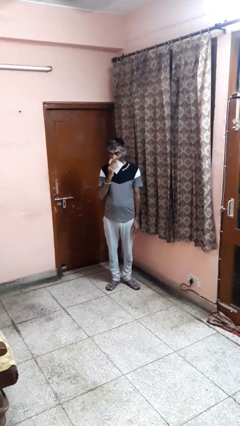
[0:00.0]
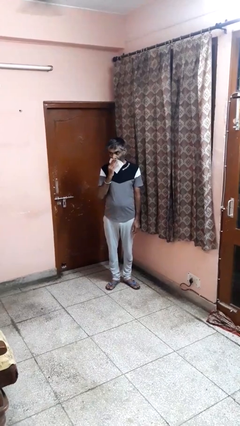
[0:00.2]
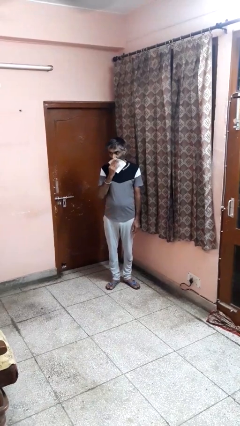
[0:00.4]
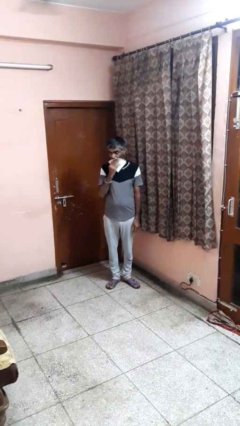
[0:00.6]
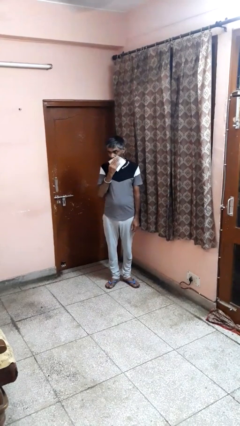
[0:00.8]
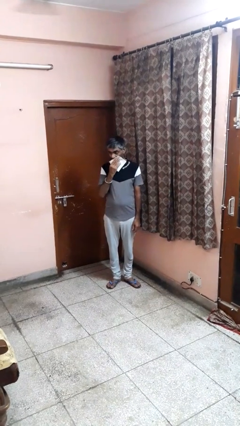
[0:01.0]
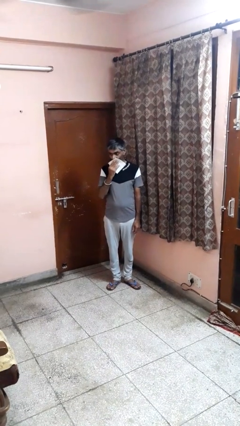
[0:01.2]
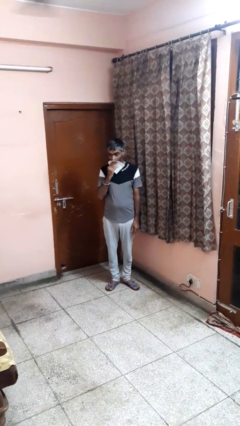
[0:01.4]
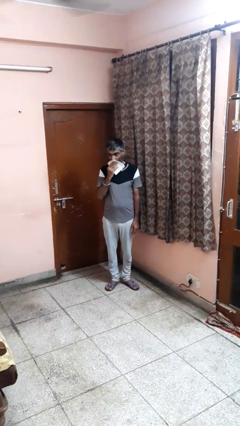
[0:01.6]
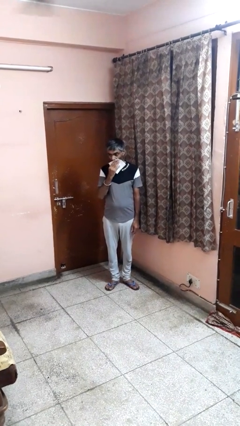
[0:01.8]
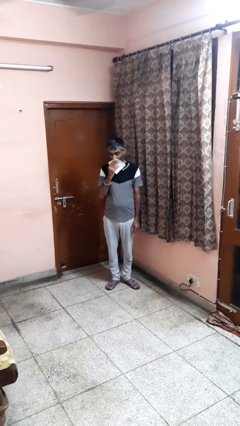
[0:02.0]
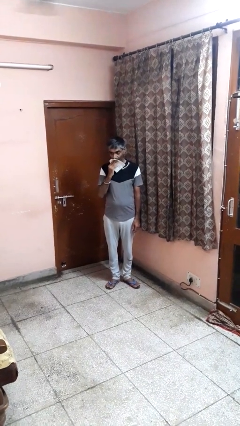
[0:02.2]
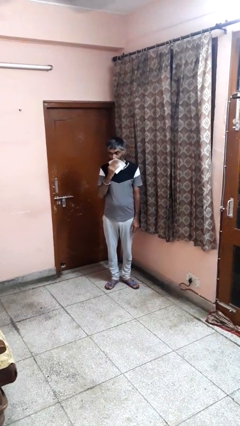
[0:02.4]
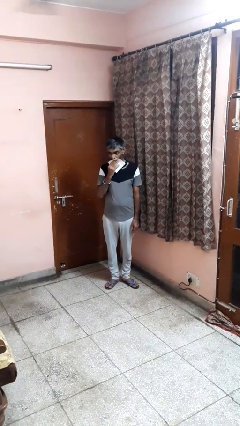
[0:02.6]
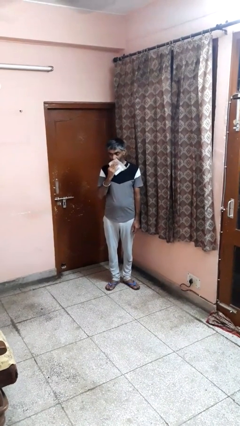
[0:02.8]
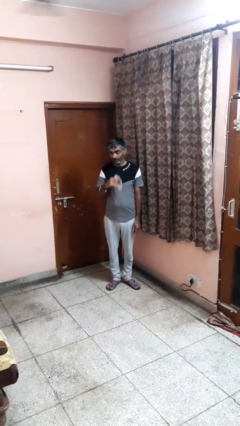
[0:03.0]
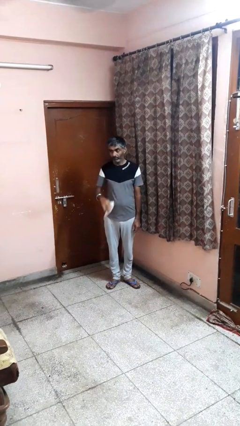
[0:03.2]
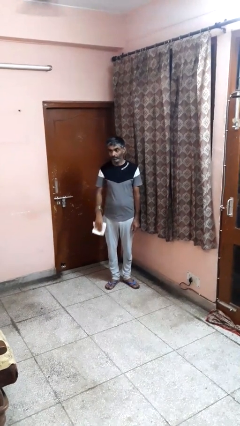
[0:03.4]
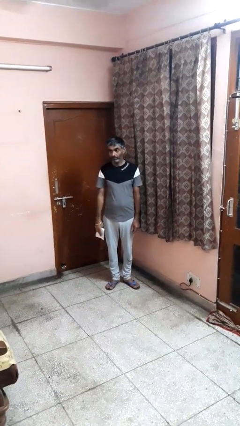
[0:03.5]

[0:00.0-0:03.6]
person wipes mouth with napkin

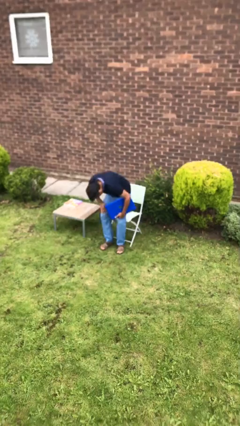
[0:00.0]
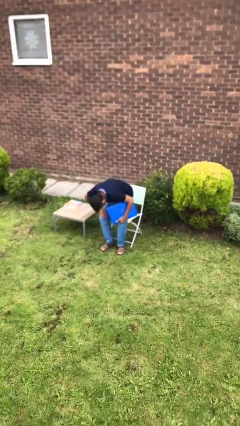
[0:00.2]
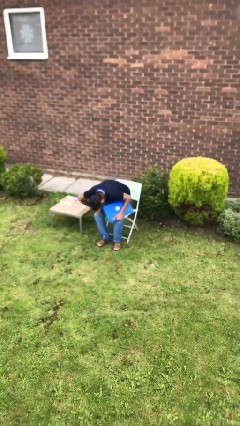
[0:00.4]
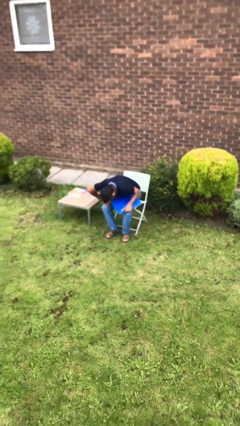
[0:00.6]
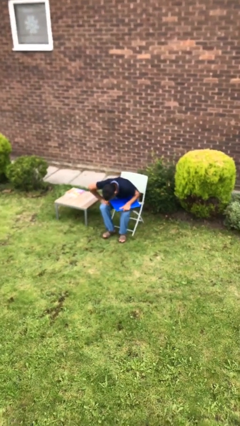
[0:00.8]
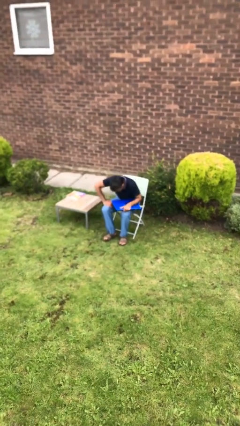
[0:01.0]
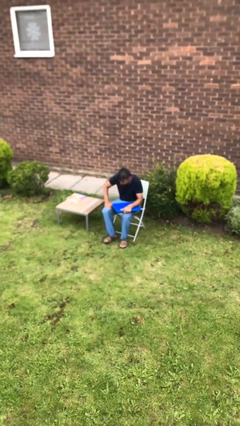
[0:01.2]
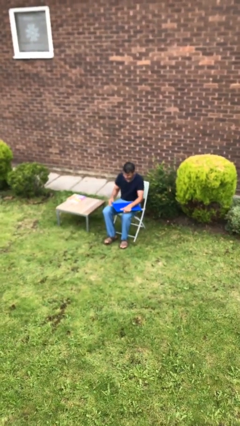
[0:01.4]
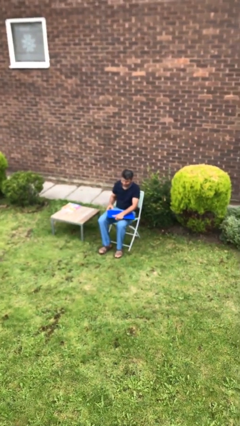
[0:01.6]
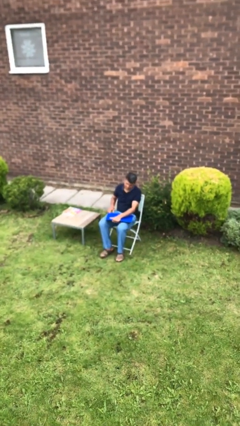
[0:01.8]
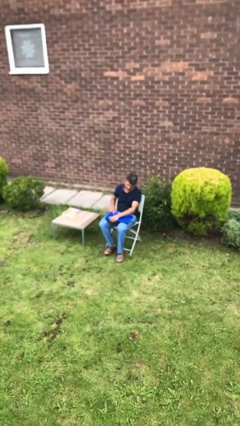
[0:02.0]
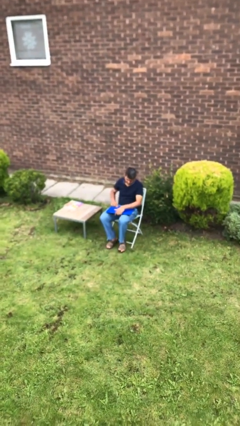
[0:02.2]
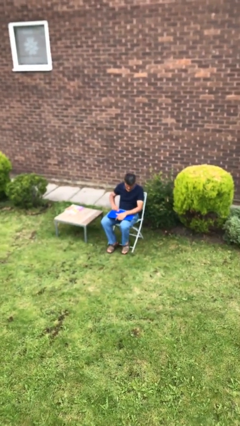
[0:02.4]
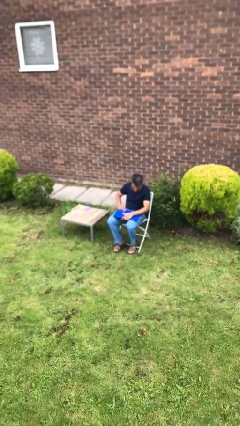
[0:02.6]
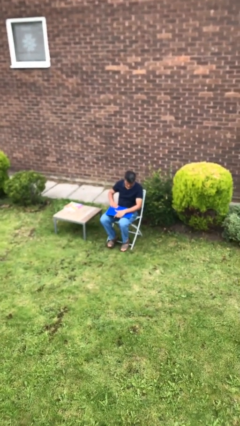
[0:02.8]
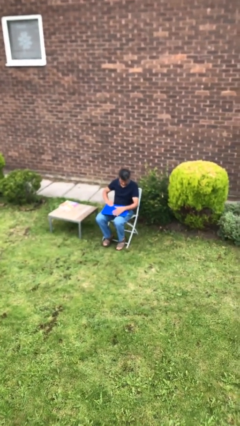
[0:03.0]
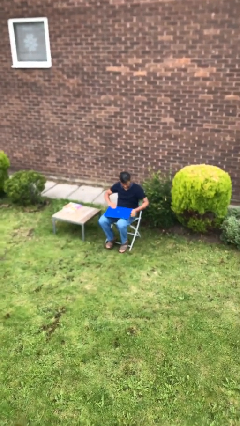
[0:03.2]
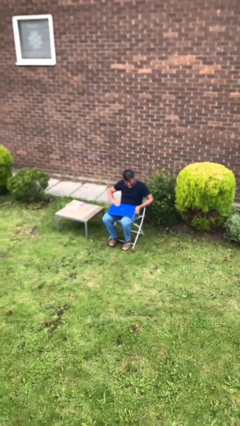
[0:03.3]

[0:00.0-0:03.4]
person sits down

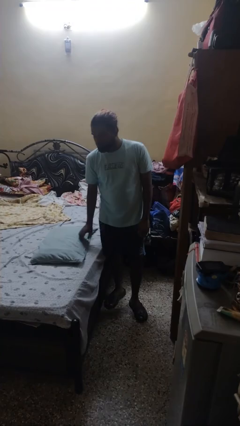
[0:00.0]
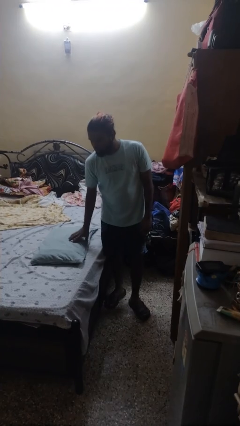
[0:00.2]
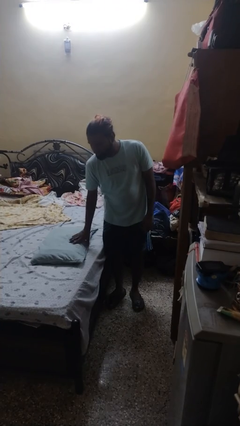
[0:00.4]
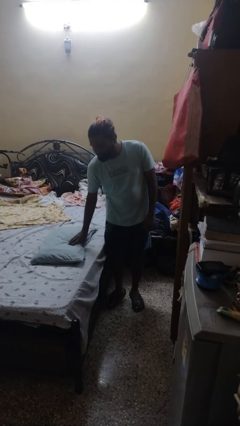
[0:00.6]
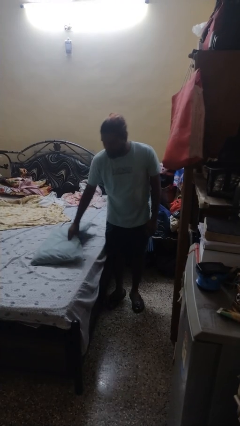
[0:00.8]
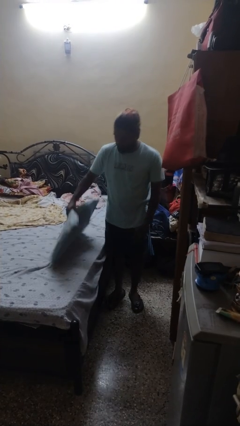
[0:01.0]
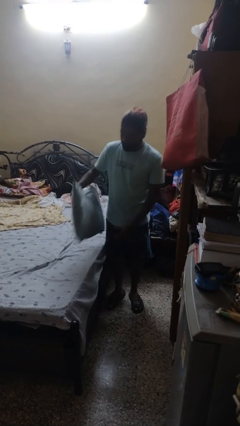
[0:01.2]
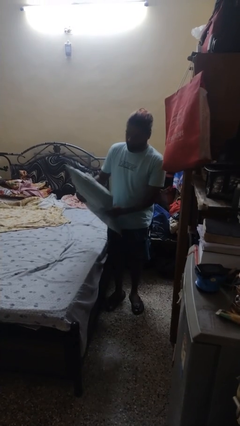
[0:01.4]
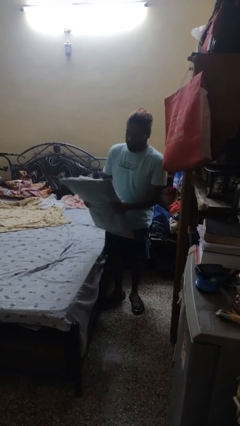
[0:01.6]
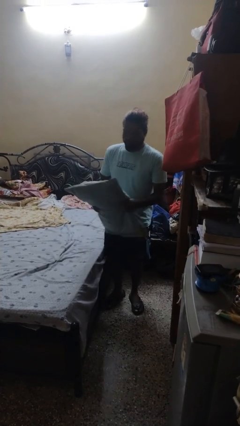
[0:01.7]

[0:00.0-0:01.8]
person picks up object from bed

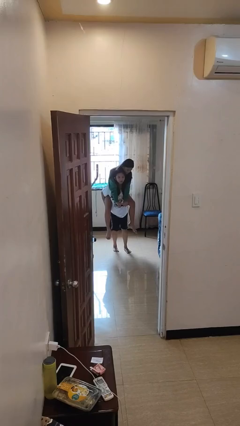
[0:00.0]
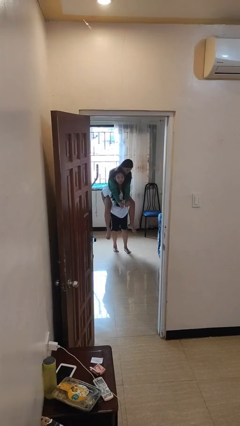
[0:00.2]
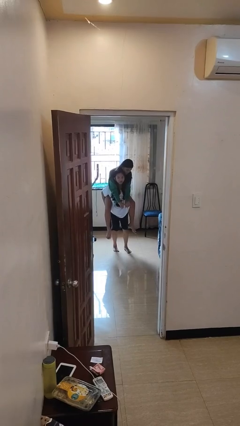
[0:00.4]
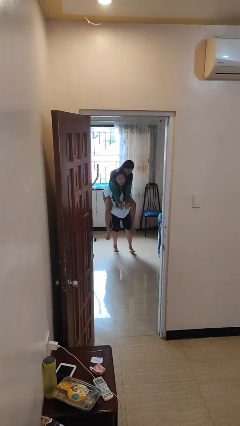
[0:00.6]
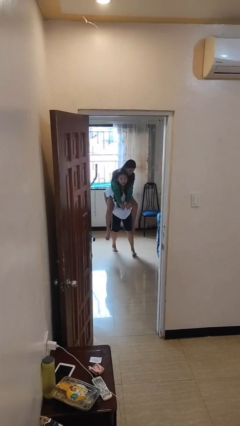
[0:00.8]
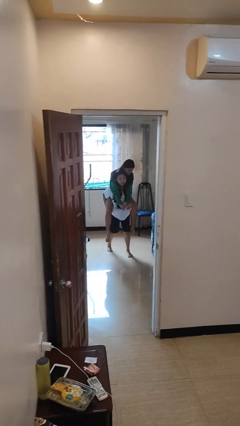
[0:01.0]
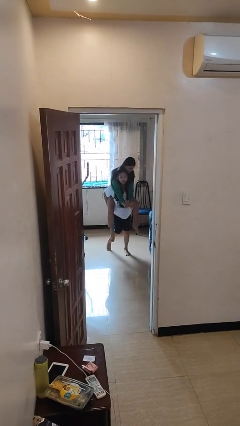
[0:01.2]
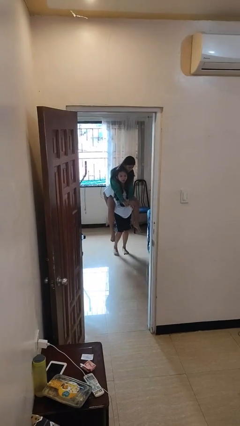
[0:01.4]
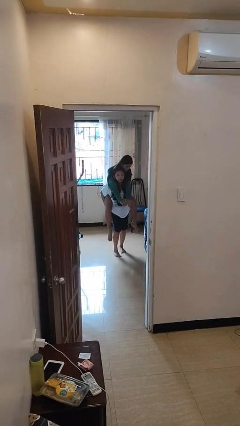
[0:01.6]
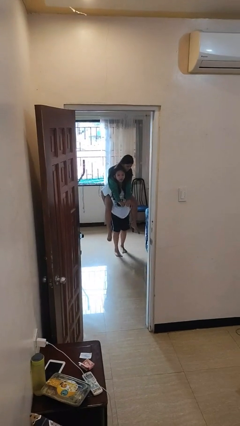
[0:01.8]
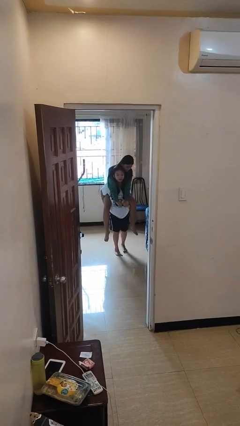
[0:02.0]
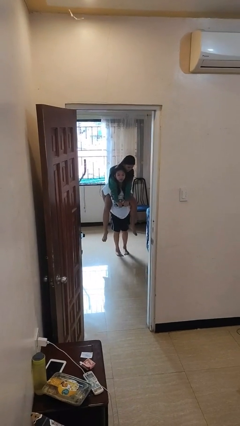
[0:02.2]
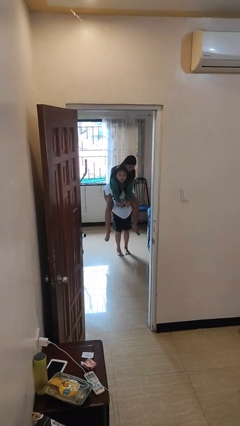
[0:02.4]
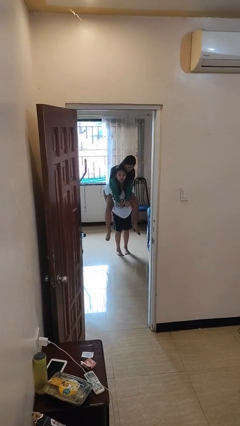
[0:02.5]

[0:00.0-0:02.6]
person carries person on back

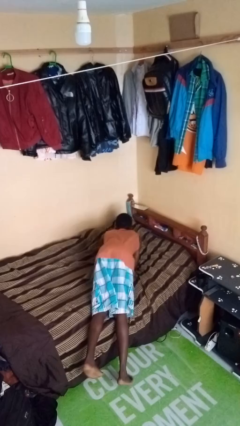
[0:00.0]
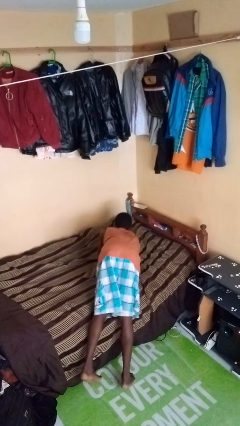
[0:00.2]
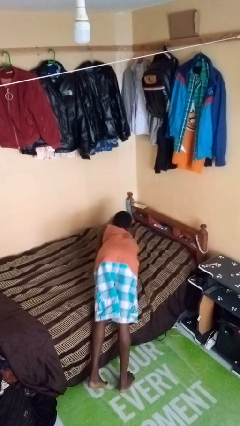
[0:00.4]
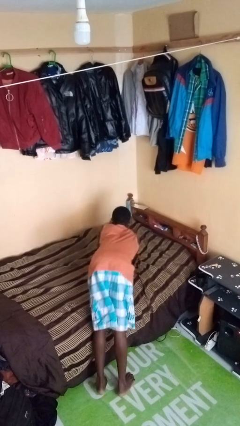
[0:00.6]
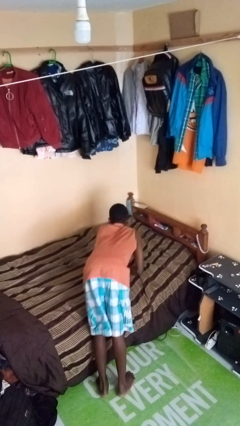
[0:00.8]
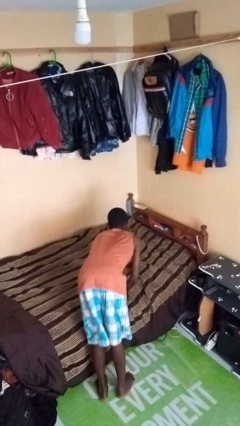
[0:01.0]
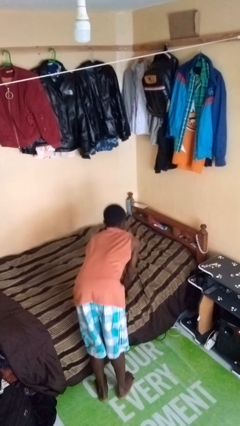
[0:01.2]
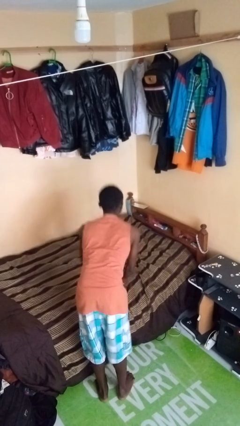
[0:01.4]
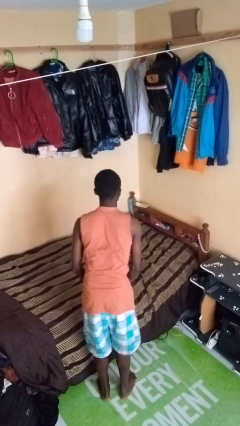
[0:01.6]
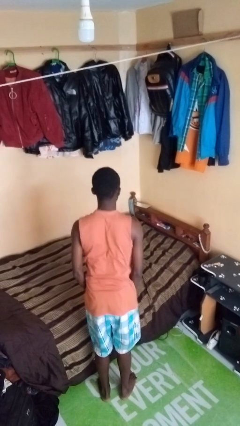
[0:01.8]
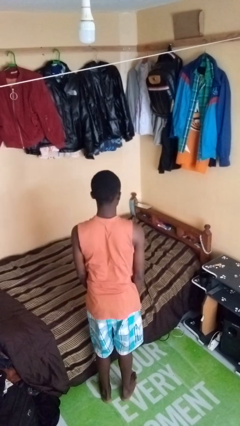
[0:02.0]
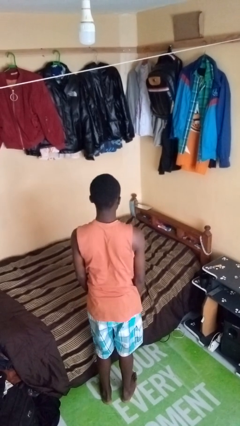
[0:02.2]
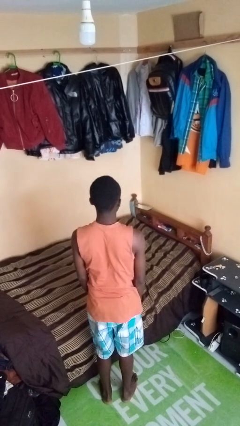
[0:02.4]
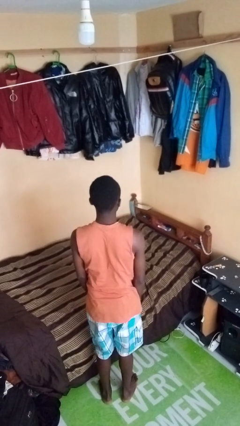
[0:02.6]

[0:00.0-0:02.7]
person stands up

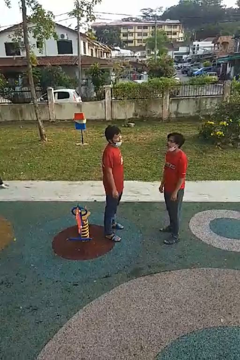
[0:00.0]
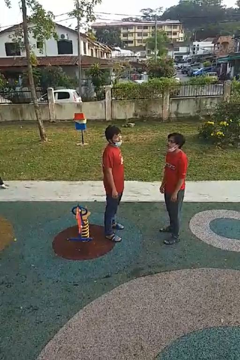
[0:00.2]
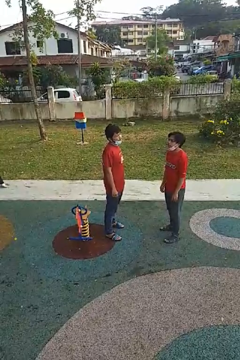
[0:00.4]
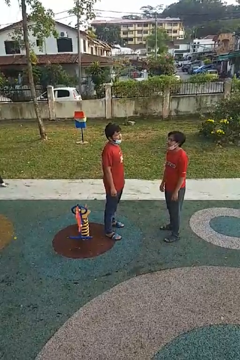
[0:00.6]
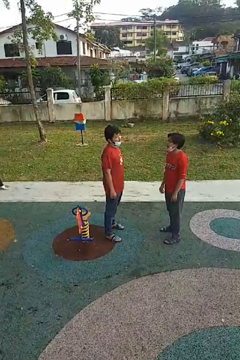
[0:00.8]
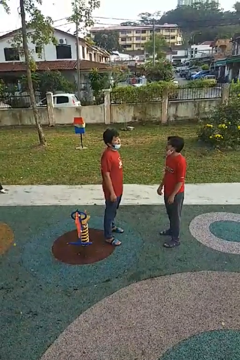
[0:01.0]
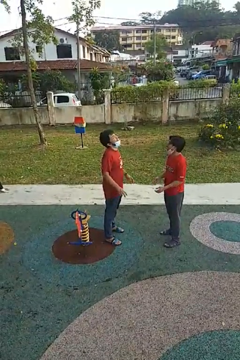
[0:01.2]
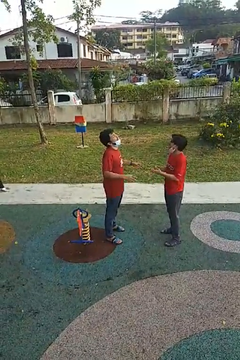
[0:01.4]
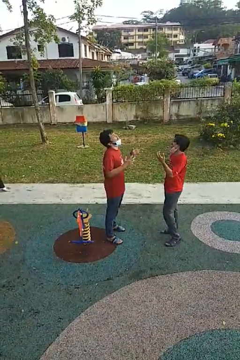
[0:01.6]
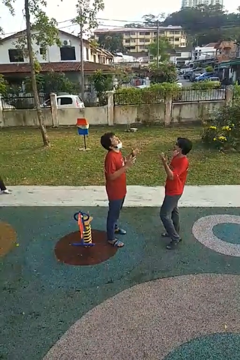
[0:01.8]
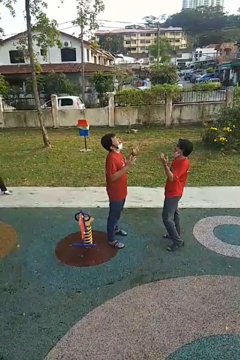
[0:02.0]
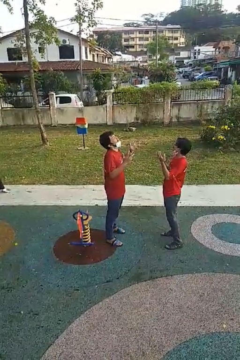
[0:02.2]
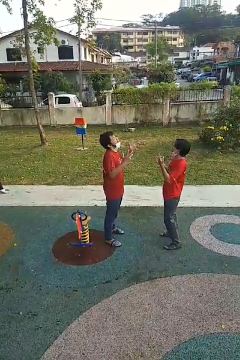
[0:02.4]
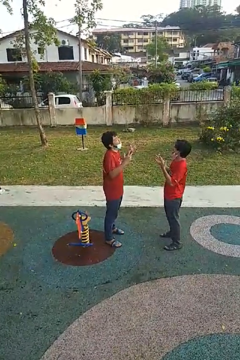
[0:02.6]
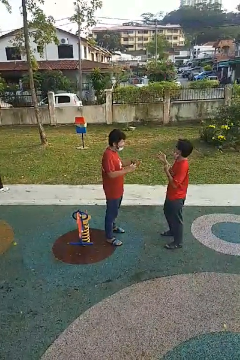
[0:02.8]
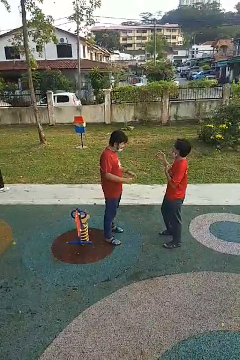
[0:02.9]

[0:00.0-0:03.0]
person laughs with person

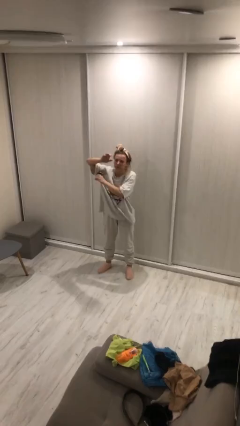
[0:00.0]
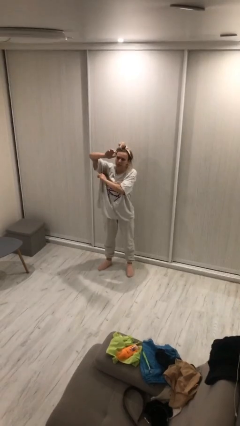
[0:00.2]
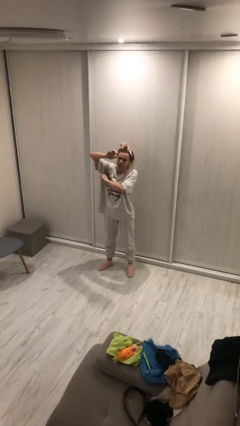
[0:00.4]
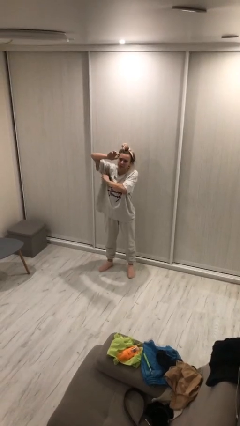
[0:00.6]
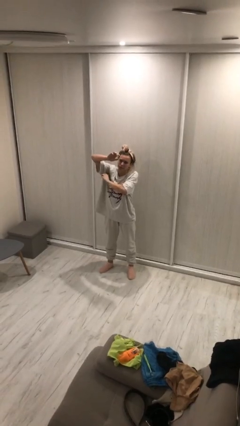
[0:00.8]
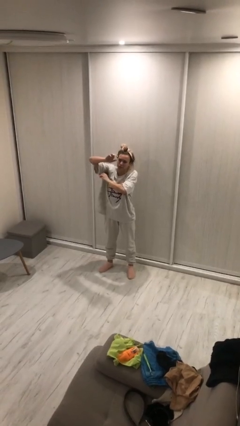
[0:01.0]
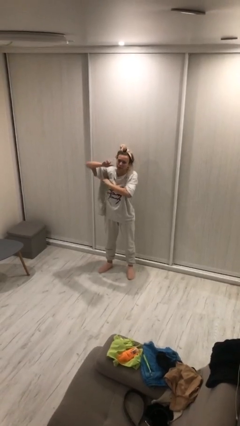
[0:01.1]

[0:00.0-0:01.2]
person applies deodorant
